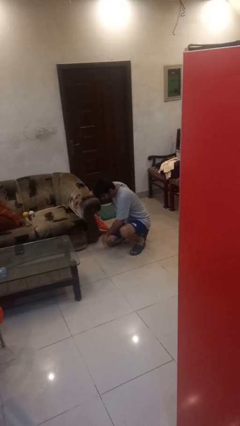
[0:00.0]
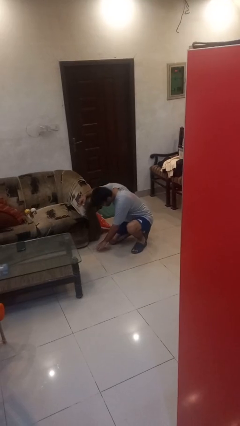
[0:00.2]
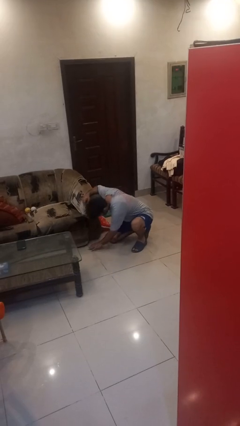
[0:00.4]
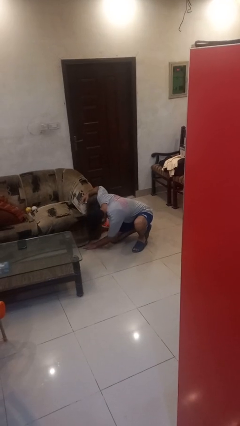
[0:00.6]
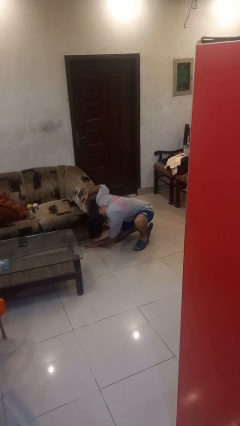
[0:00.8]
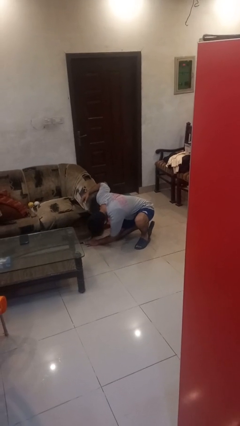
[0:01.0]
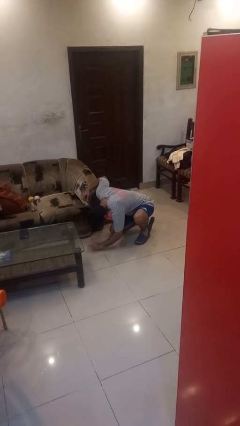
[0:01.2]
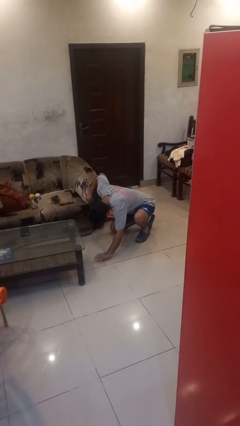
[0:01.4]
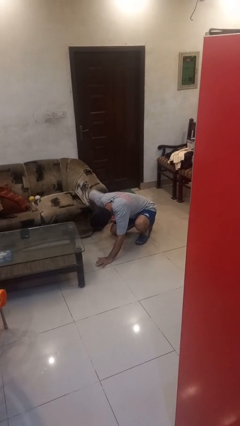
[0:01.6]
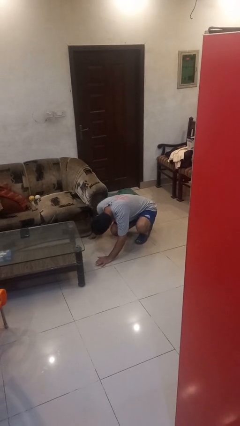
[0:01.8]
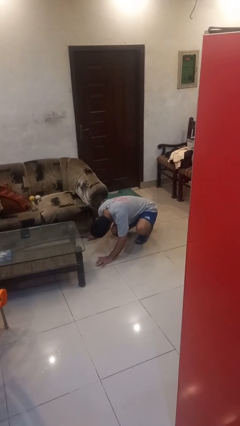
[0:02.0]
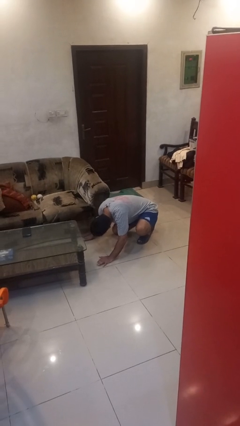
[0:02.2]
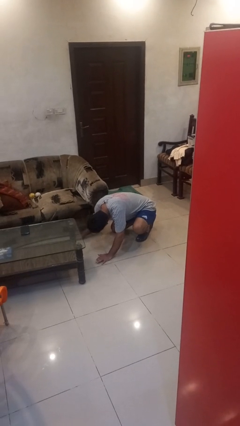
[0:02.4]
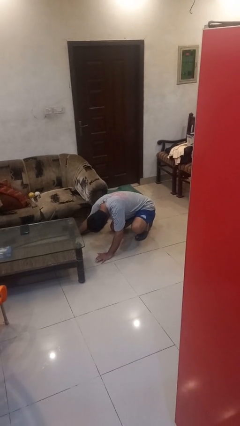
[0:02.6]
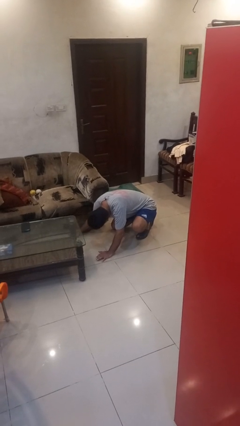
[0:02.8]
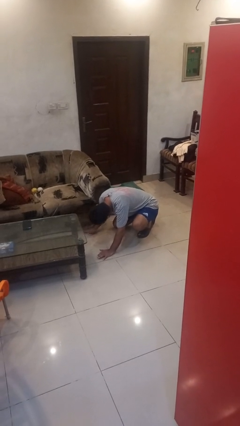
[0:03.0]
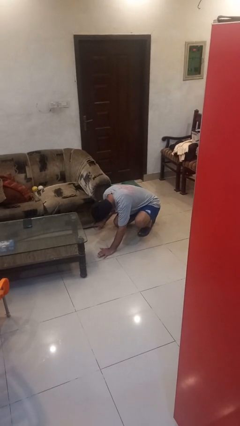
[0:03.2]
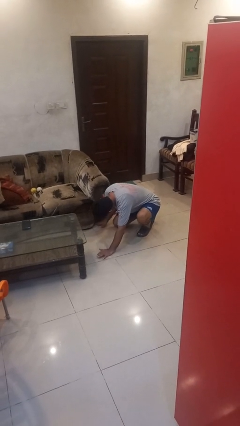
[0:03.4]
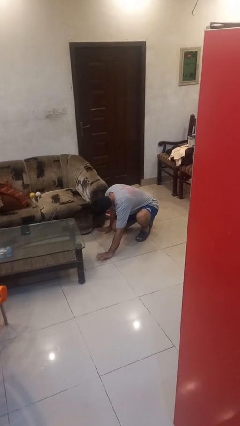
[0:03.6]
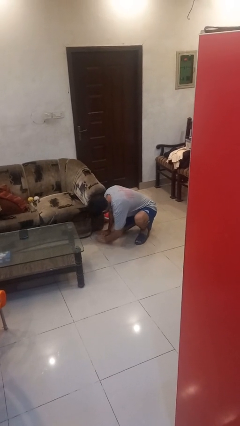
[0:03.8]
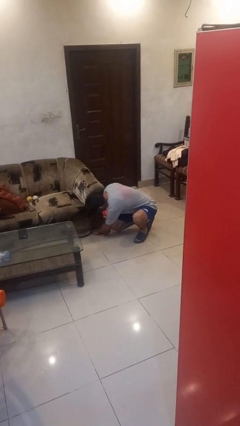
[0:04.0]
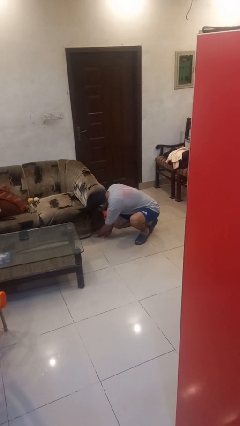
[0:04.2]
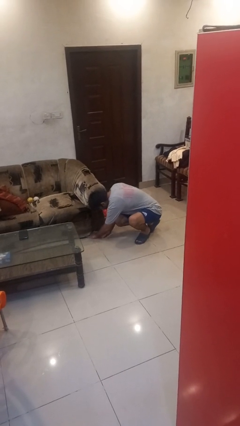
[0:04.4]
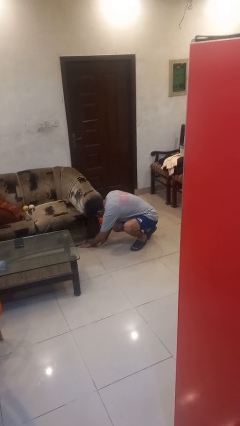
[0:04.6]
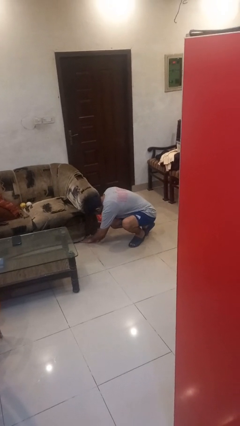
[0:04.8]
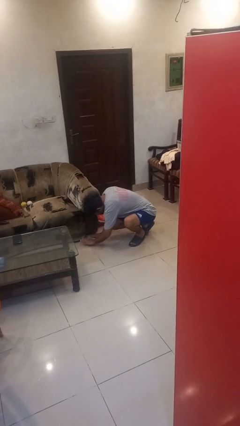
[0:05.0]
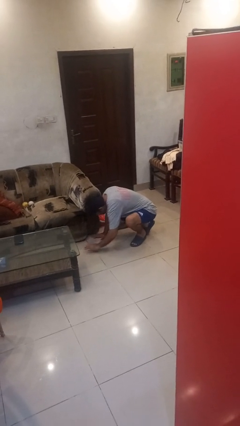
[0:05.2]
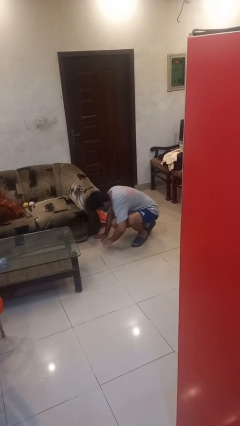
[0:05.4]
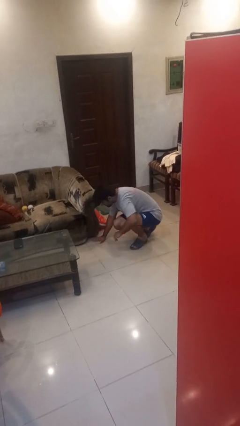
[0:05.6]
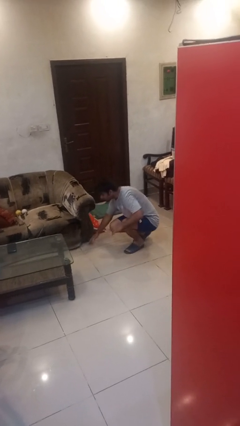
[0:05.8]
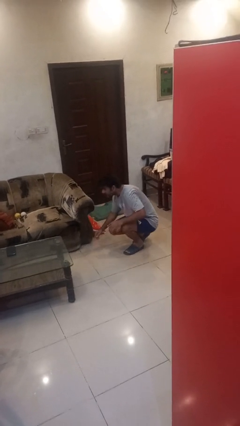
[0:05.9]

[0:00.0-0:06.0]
person searches under couch

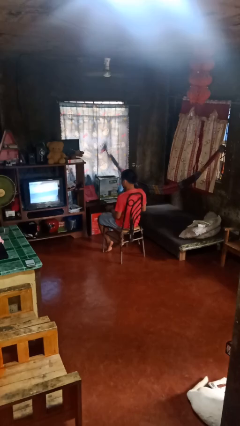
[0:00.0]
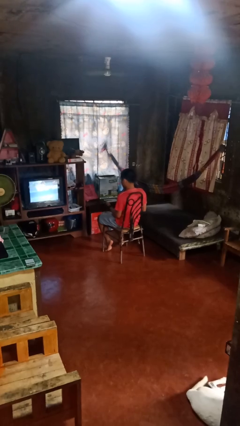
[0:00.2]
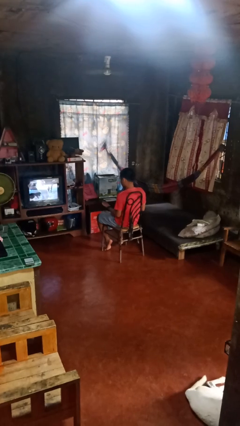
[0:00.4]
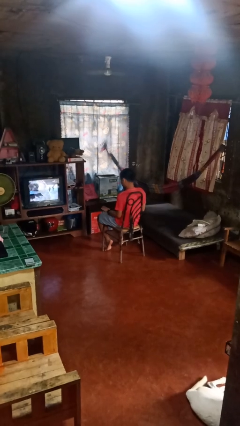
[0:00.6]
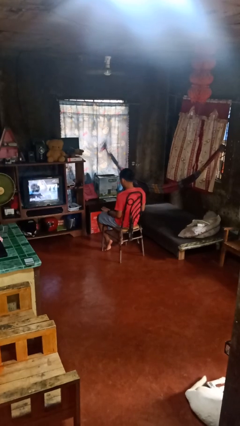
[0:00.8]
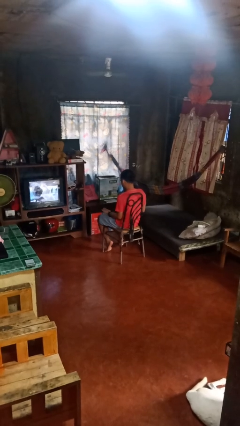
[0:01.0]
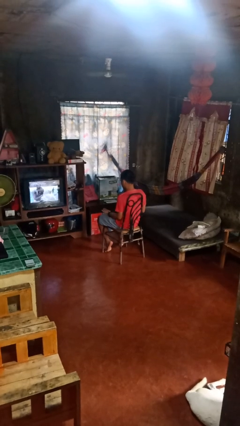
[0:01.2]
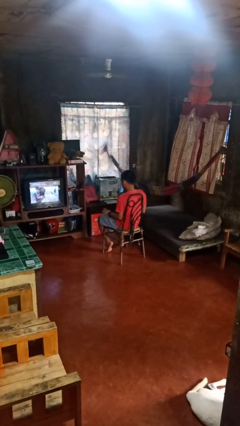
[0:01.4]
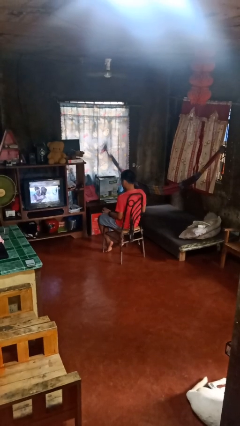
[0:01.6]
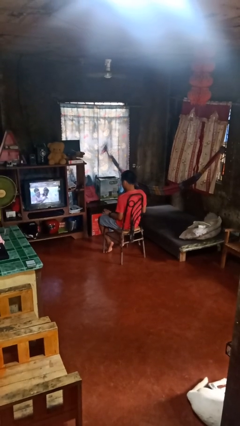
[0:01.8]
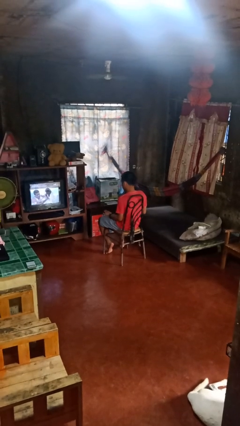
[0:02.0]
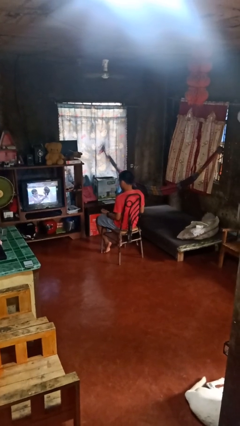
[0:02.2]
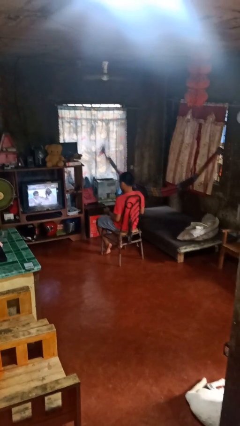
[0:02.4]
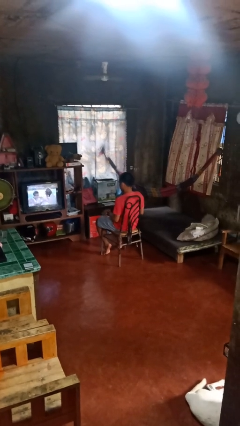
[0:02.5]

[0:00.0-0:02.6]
person looks at hands in lap

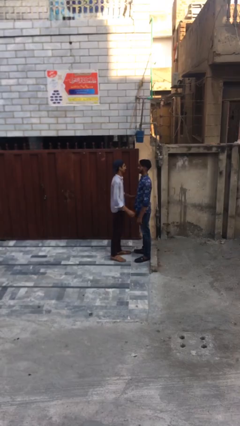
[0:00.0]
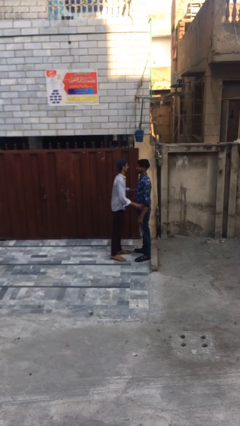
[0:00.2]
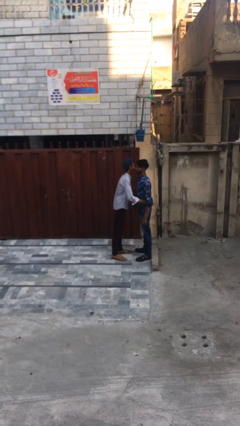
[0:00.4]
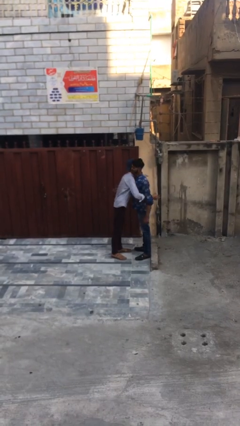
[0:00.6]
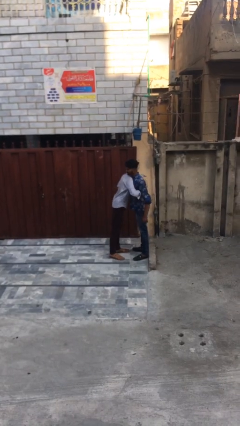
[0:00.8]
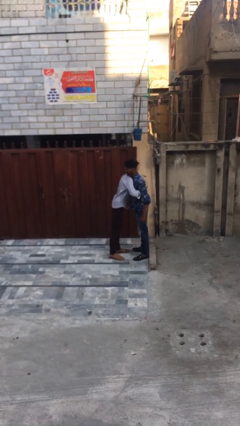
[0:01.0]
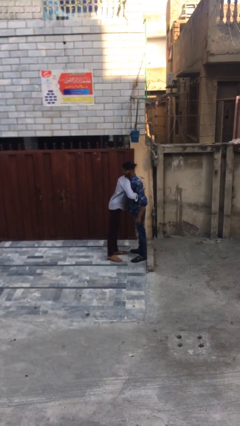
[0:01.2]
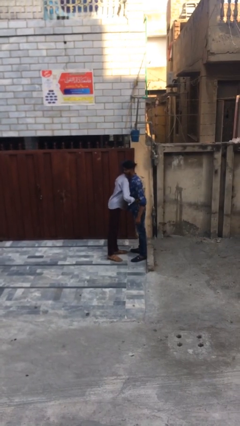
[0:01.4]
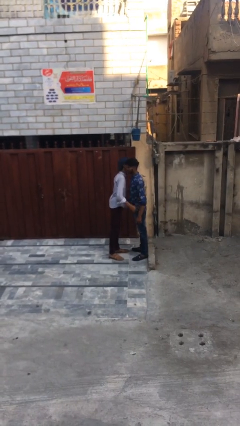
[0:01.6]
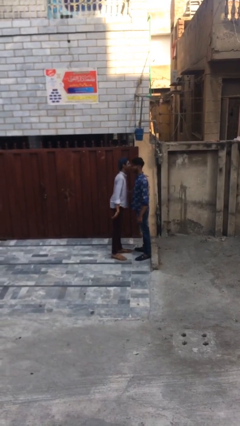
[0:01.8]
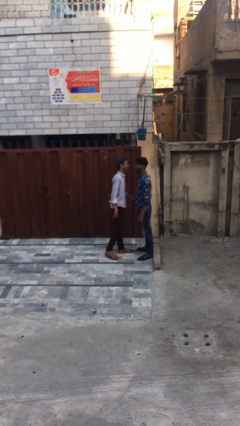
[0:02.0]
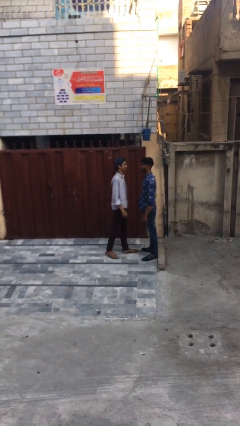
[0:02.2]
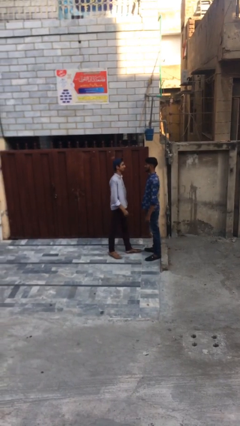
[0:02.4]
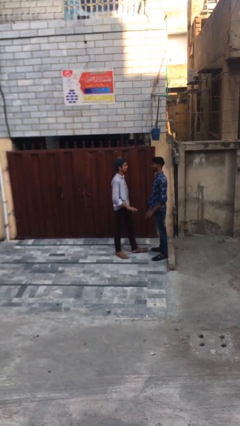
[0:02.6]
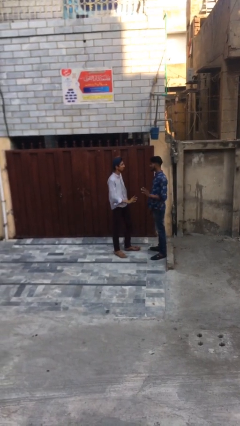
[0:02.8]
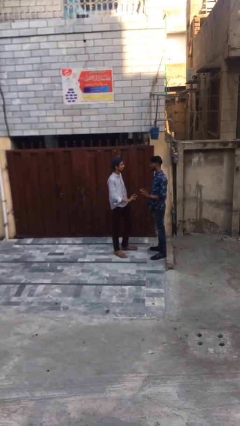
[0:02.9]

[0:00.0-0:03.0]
person embraces person

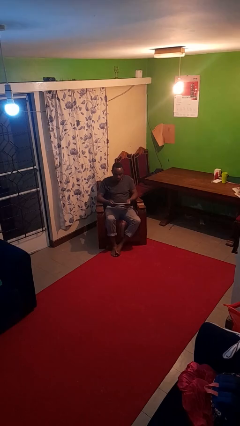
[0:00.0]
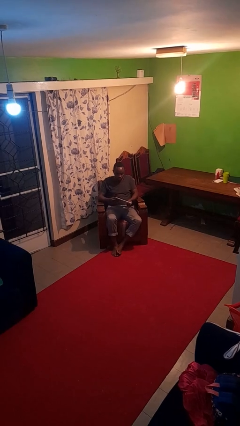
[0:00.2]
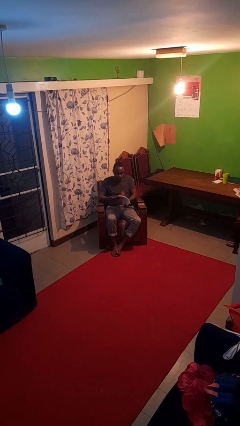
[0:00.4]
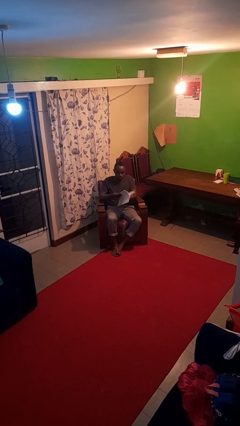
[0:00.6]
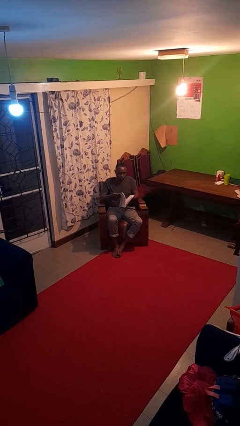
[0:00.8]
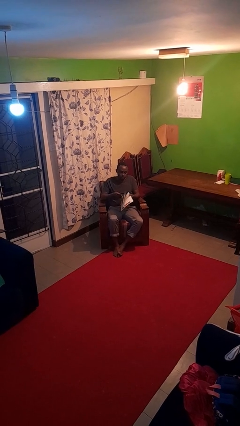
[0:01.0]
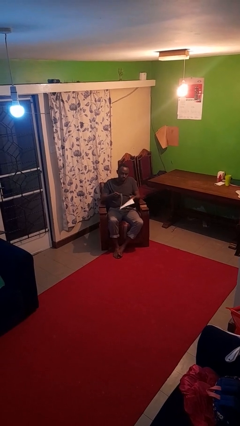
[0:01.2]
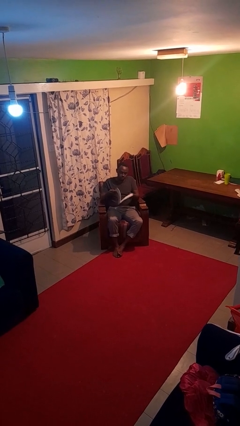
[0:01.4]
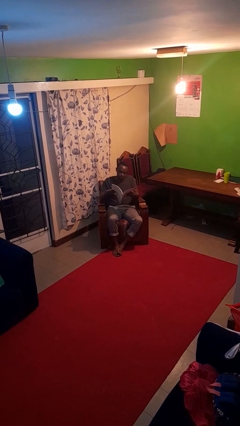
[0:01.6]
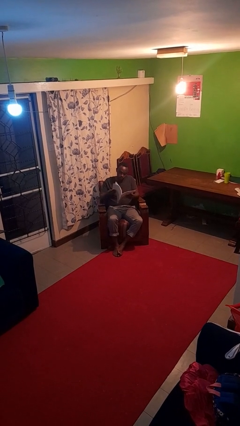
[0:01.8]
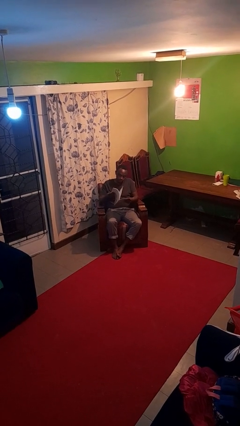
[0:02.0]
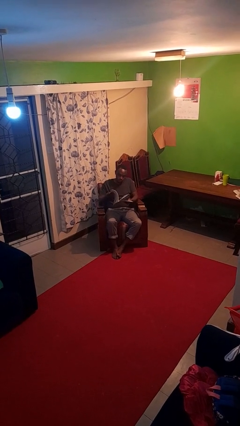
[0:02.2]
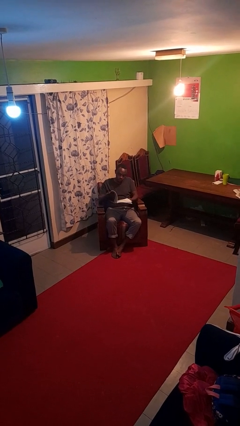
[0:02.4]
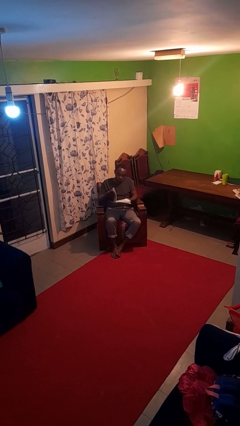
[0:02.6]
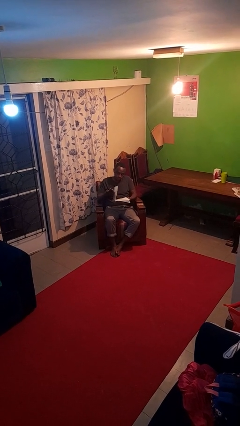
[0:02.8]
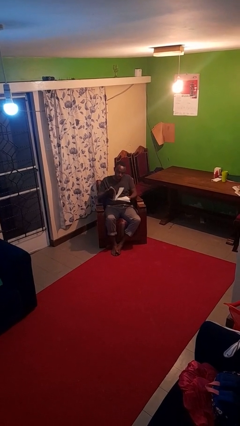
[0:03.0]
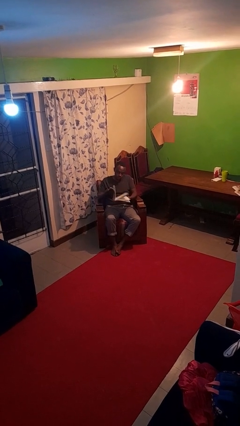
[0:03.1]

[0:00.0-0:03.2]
person reads magazine

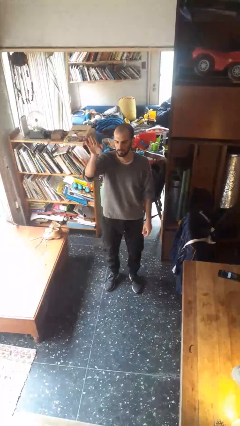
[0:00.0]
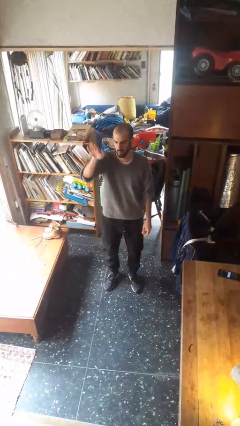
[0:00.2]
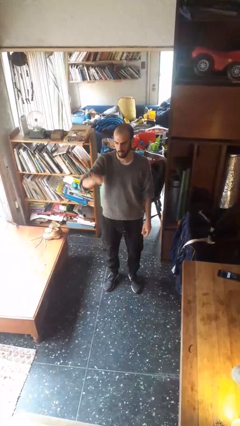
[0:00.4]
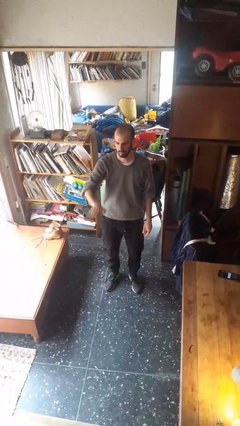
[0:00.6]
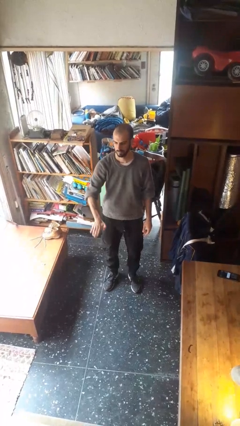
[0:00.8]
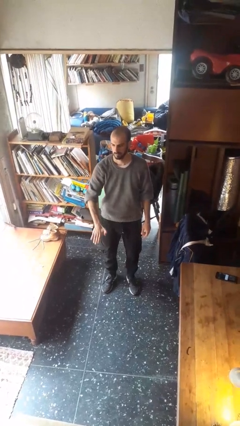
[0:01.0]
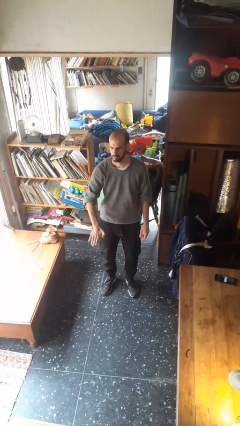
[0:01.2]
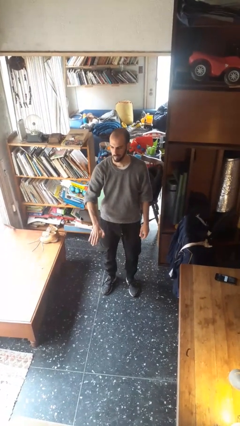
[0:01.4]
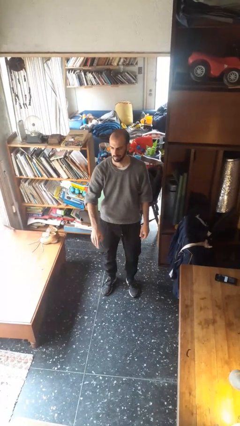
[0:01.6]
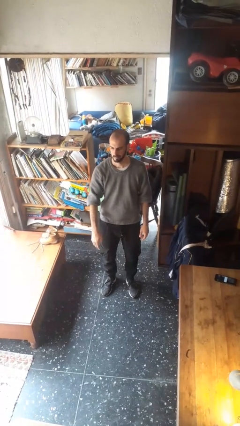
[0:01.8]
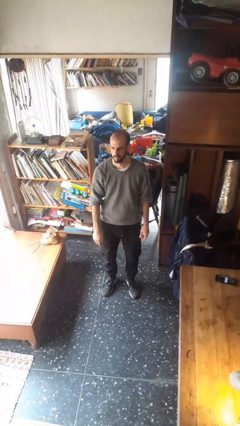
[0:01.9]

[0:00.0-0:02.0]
person gestures swipe down

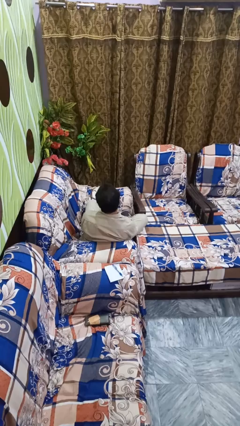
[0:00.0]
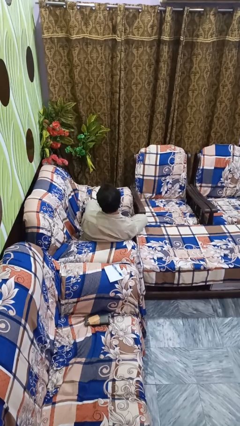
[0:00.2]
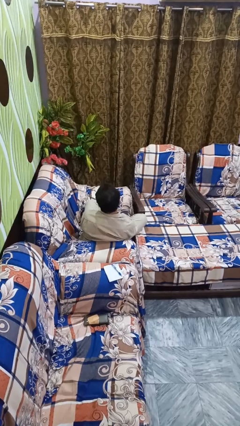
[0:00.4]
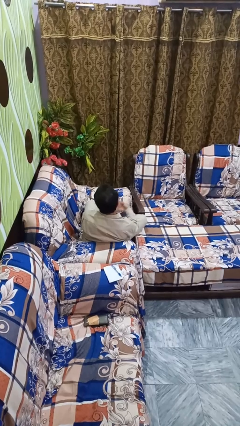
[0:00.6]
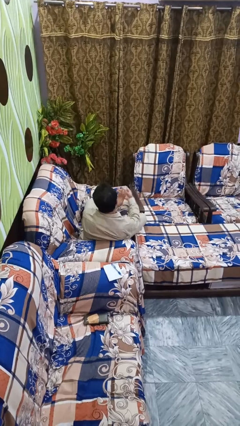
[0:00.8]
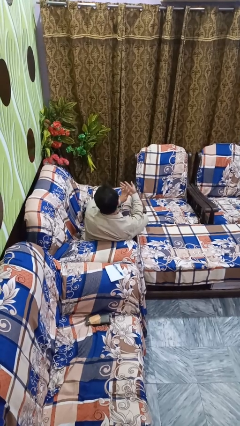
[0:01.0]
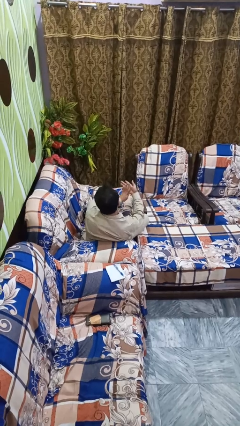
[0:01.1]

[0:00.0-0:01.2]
person gestures number four
